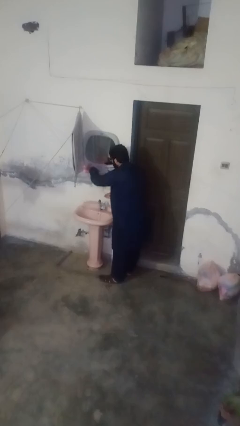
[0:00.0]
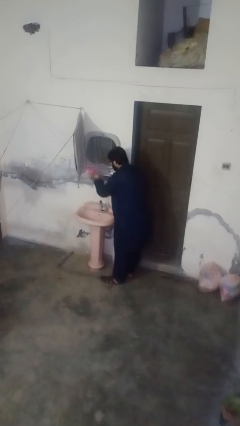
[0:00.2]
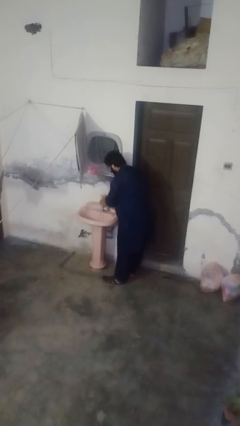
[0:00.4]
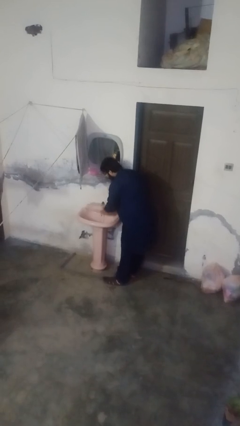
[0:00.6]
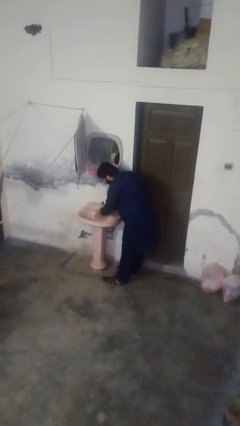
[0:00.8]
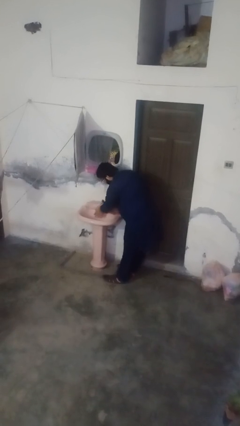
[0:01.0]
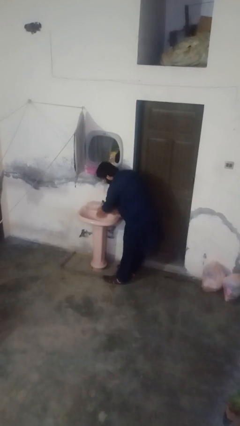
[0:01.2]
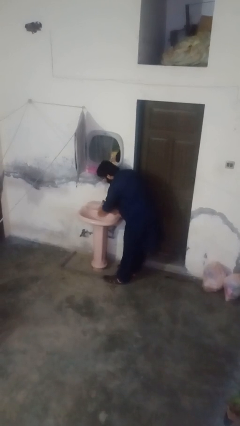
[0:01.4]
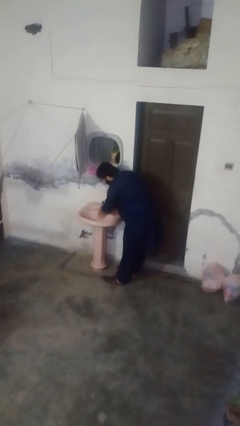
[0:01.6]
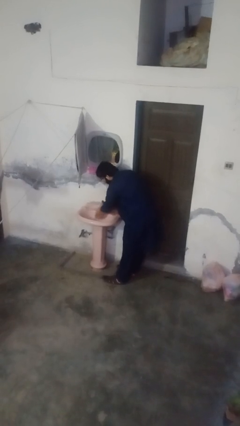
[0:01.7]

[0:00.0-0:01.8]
person dries hands with towel

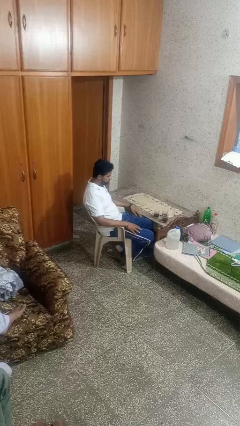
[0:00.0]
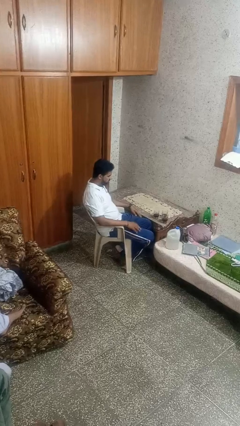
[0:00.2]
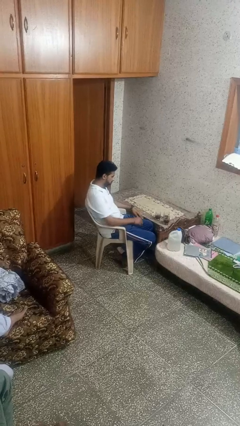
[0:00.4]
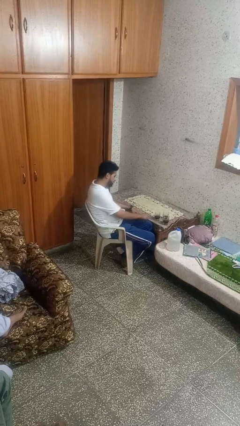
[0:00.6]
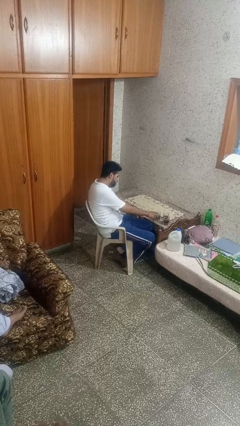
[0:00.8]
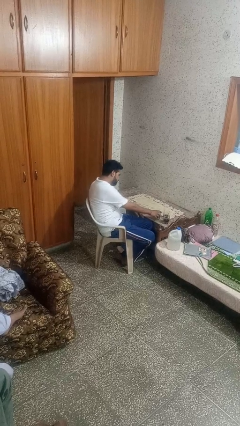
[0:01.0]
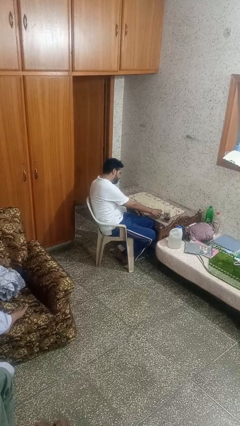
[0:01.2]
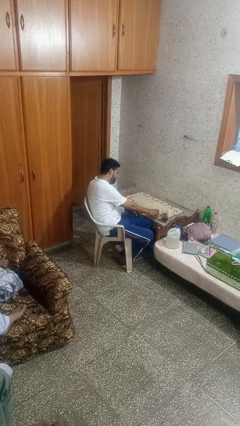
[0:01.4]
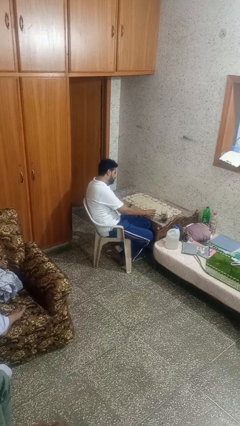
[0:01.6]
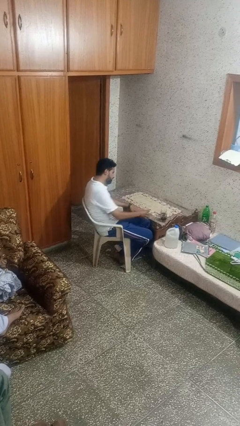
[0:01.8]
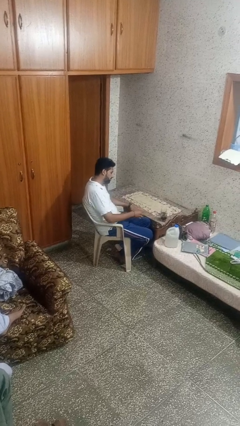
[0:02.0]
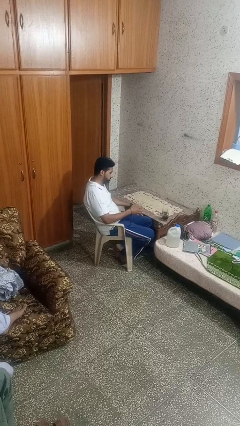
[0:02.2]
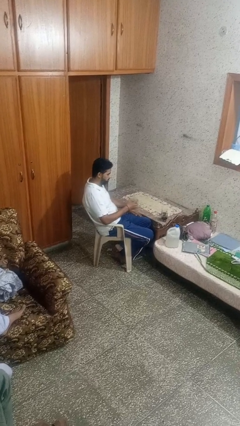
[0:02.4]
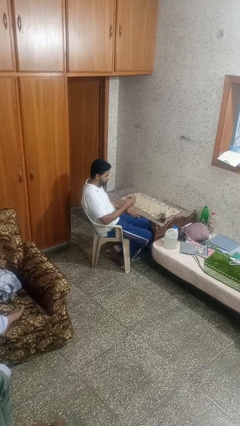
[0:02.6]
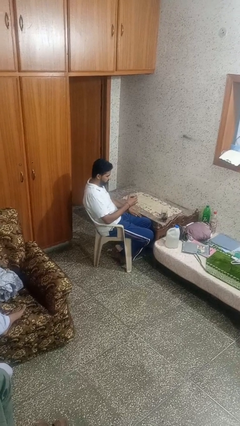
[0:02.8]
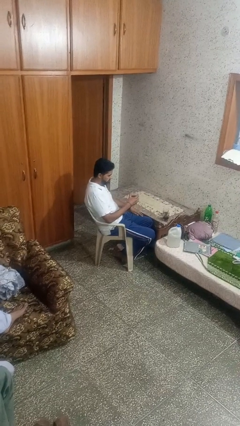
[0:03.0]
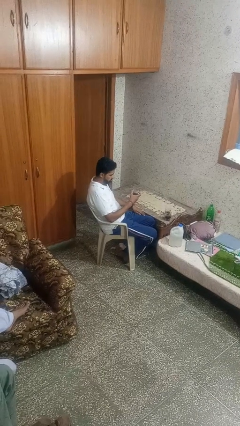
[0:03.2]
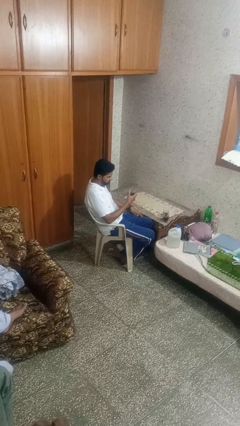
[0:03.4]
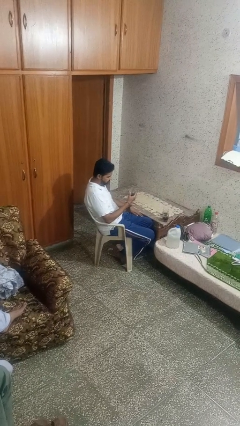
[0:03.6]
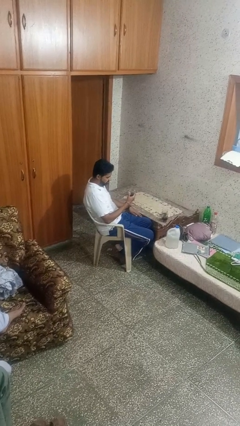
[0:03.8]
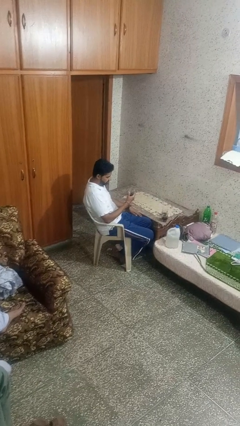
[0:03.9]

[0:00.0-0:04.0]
person picks up object from table

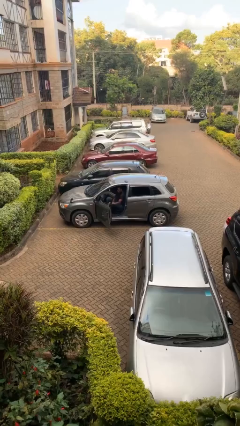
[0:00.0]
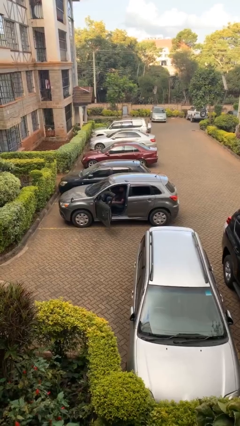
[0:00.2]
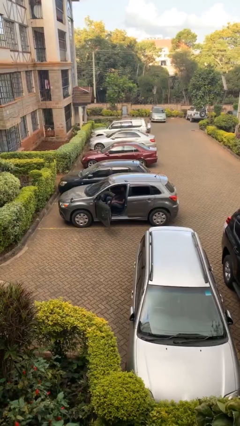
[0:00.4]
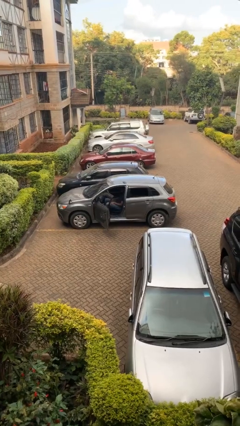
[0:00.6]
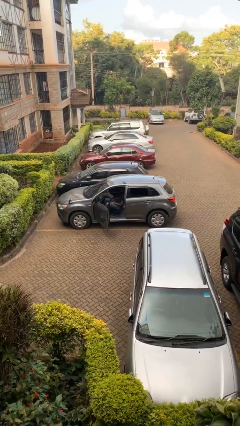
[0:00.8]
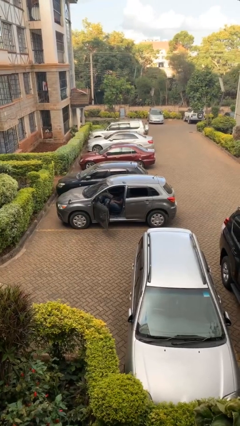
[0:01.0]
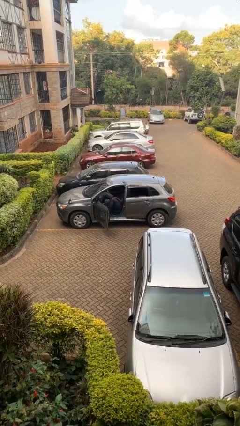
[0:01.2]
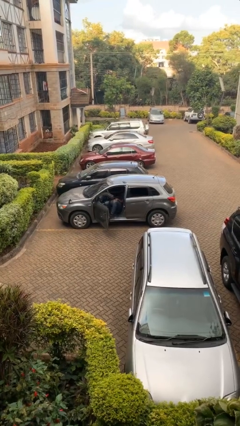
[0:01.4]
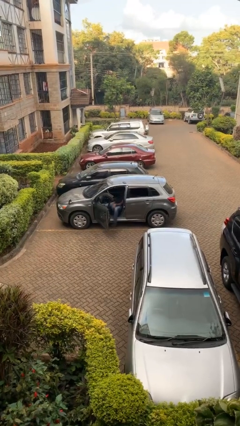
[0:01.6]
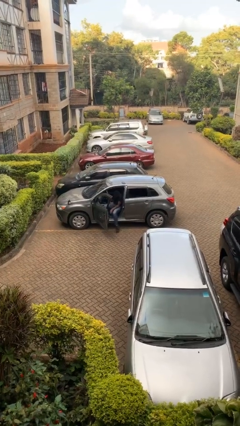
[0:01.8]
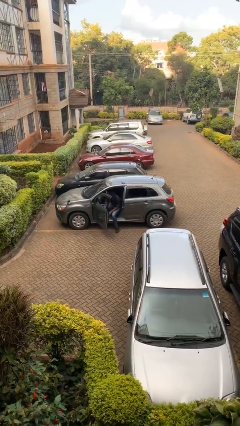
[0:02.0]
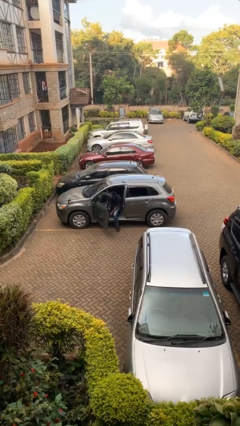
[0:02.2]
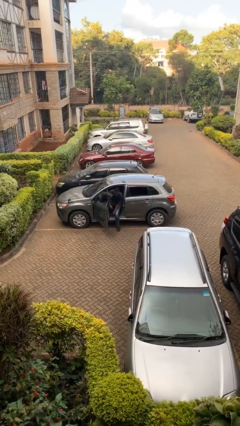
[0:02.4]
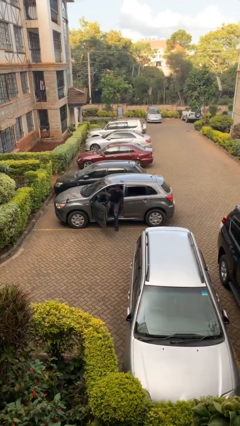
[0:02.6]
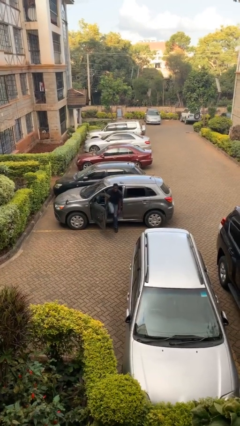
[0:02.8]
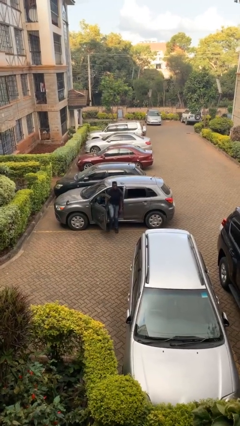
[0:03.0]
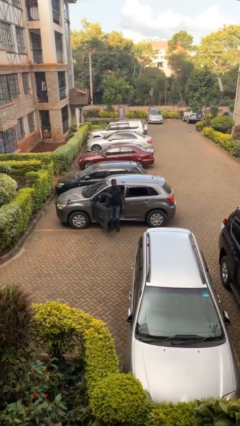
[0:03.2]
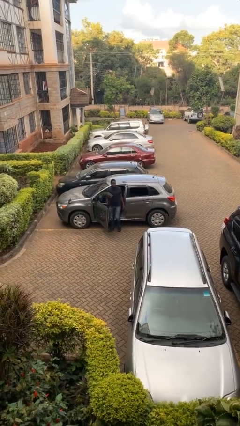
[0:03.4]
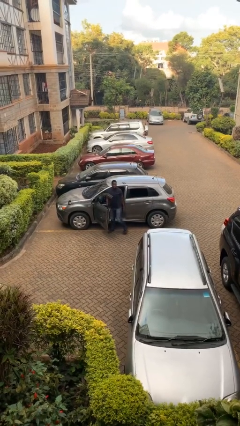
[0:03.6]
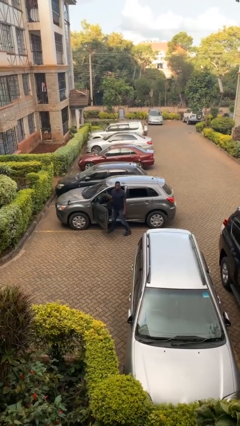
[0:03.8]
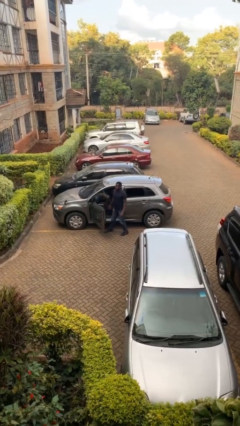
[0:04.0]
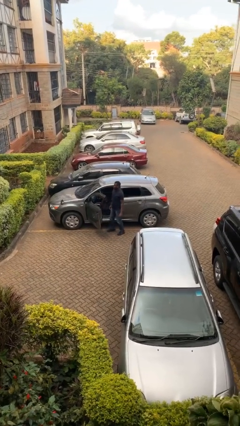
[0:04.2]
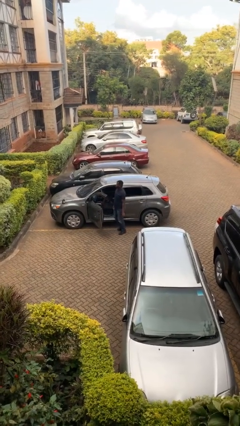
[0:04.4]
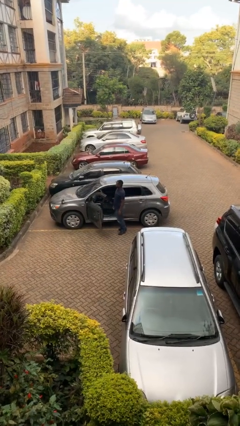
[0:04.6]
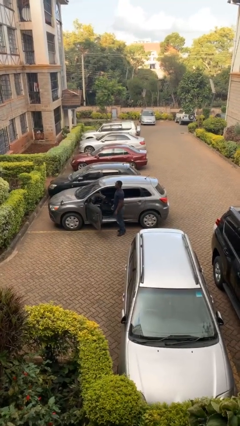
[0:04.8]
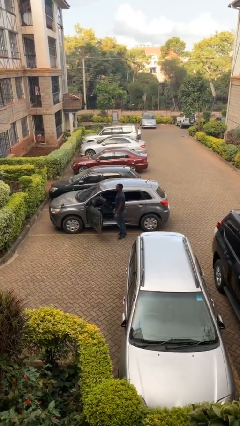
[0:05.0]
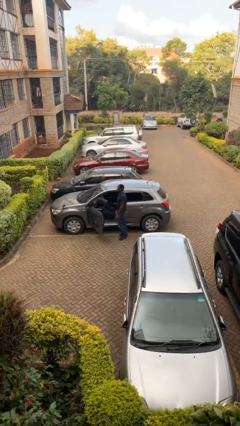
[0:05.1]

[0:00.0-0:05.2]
person exits car

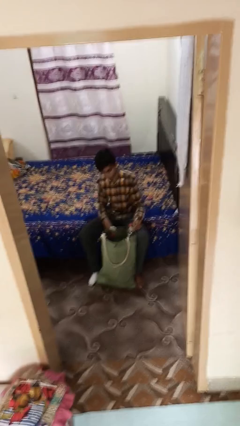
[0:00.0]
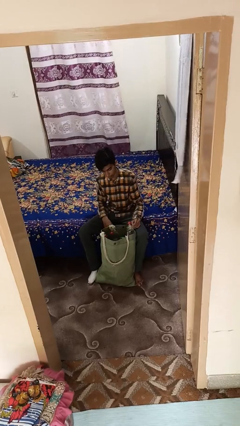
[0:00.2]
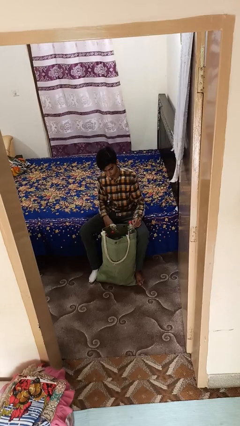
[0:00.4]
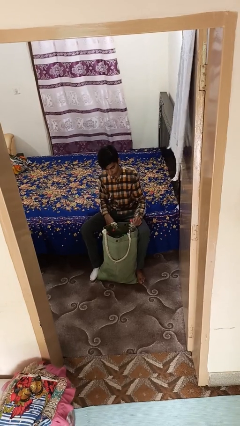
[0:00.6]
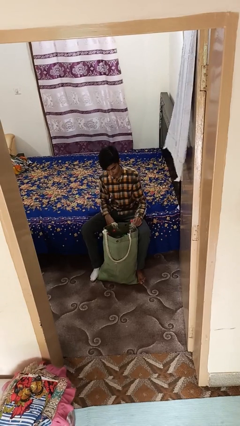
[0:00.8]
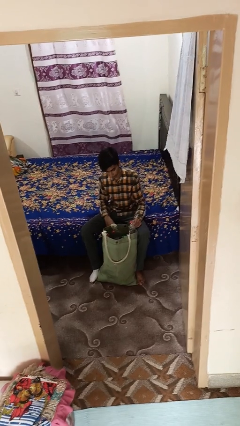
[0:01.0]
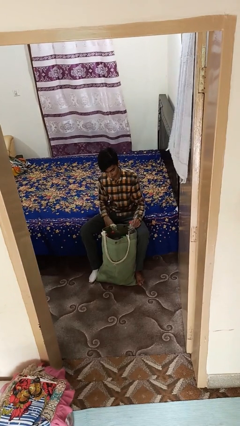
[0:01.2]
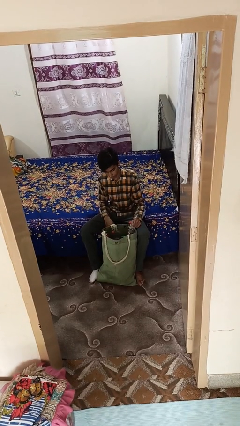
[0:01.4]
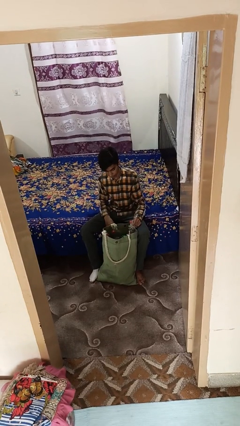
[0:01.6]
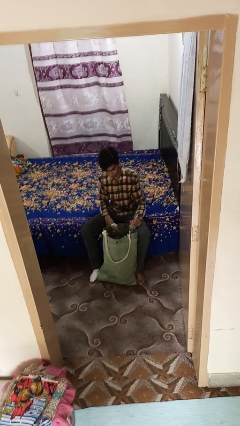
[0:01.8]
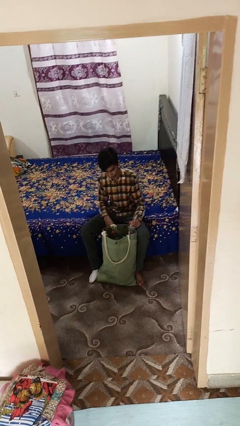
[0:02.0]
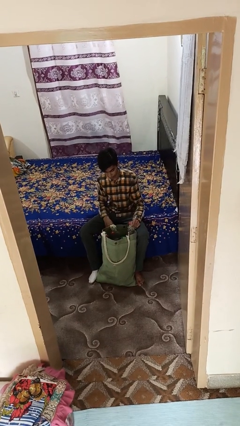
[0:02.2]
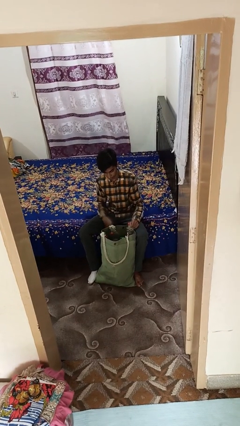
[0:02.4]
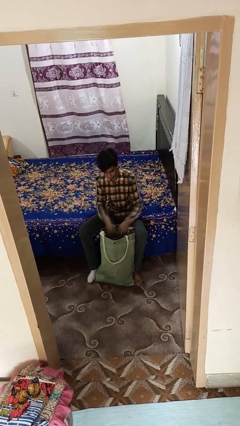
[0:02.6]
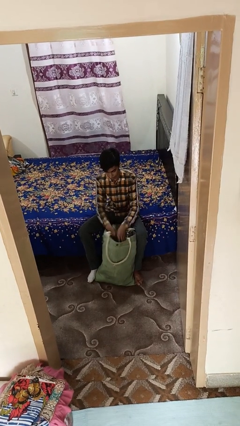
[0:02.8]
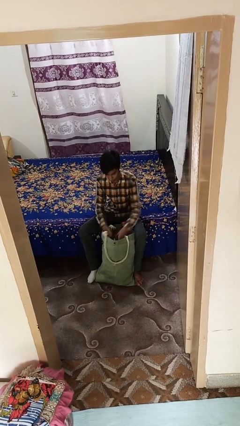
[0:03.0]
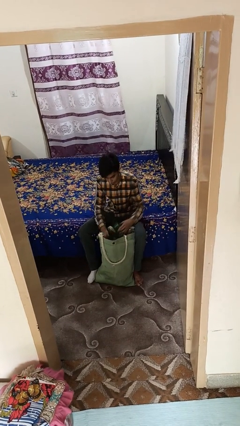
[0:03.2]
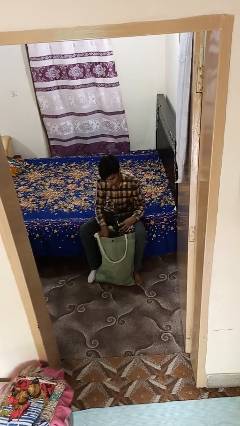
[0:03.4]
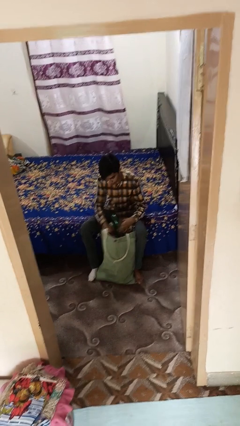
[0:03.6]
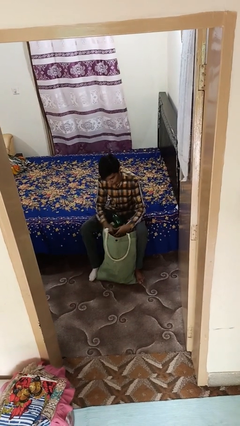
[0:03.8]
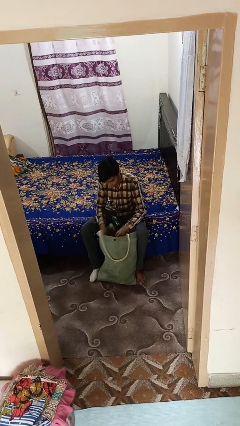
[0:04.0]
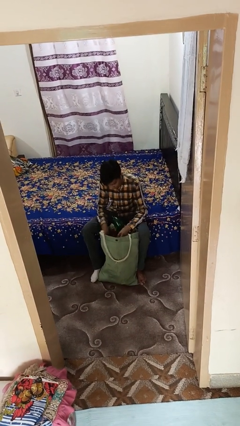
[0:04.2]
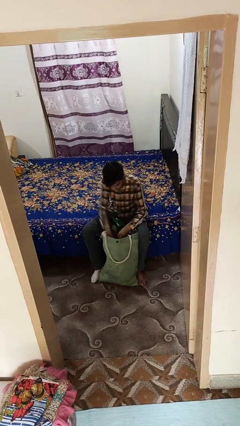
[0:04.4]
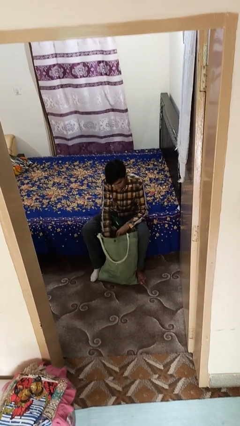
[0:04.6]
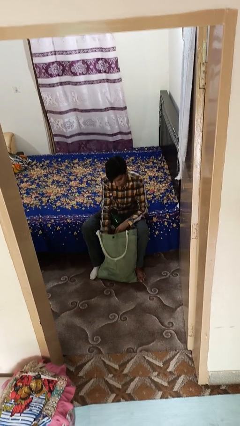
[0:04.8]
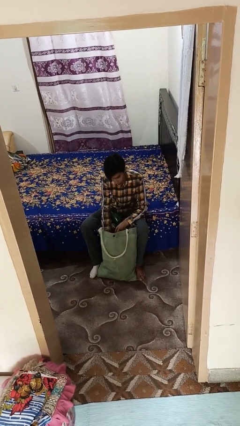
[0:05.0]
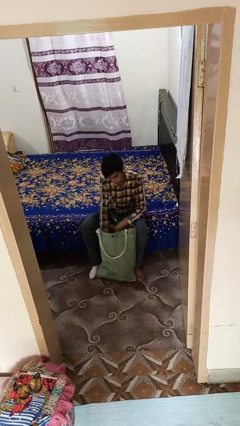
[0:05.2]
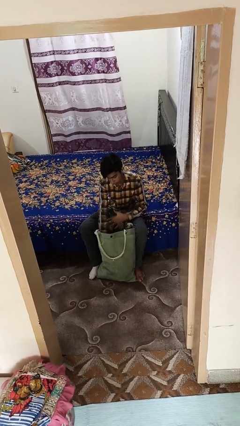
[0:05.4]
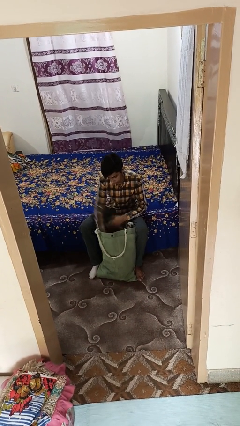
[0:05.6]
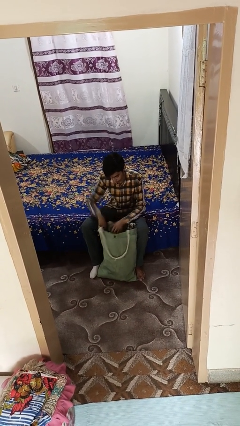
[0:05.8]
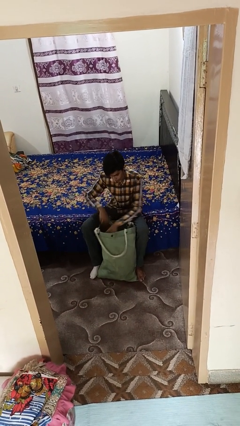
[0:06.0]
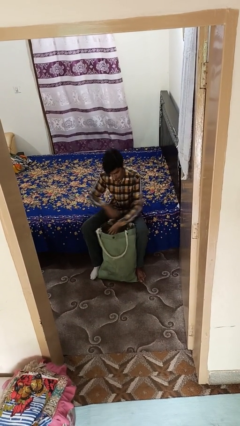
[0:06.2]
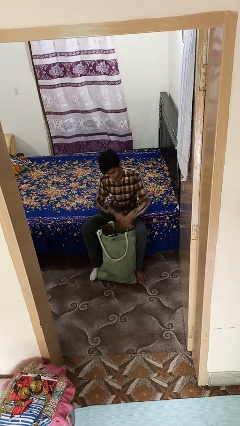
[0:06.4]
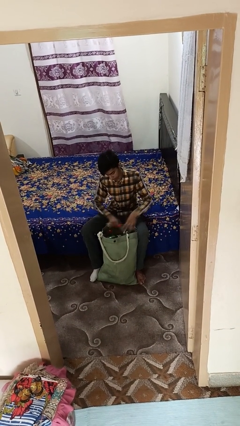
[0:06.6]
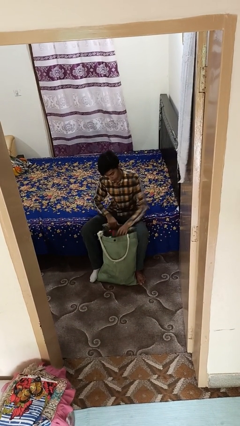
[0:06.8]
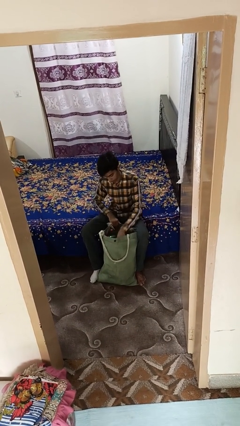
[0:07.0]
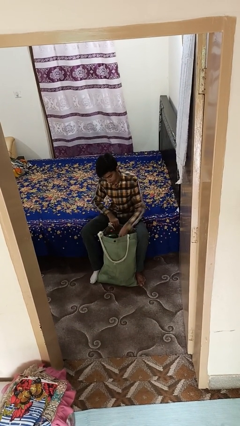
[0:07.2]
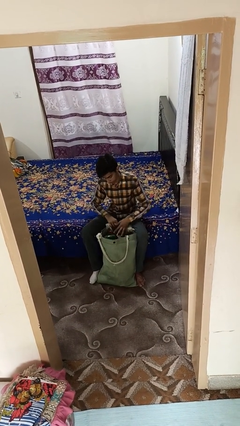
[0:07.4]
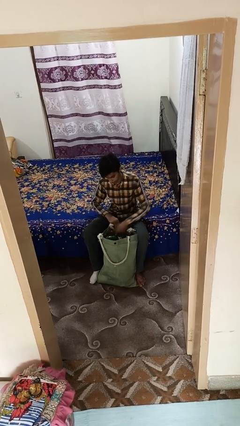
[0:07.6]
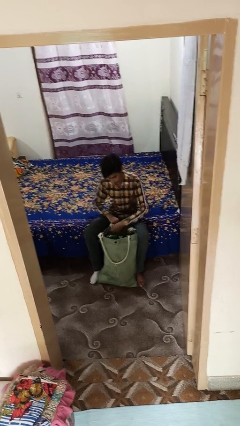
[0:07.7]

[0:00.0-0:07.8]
person searches in bag
